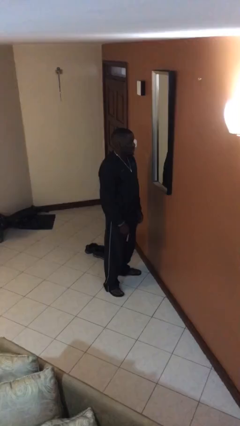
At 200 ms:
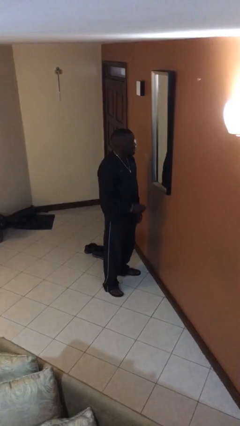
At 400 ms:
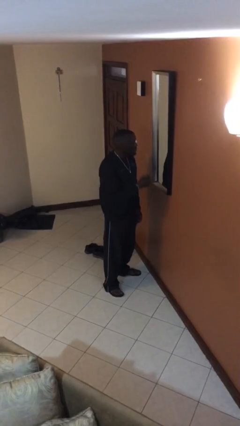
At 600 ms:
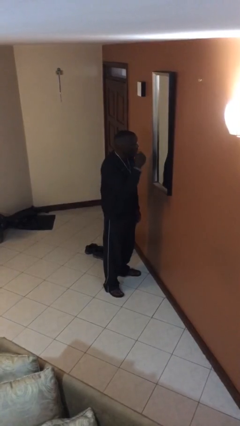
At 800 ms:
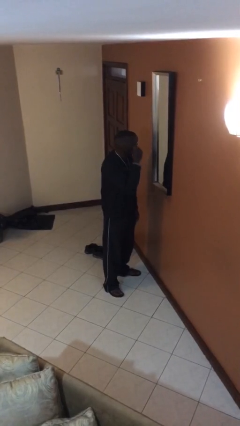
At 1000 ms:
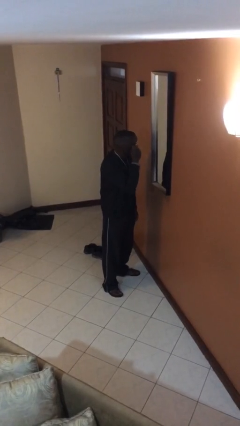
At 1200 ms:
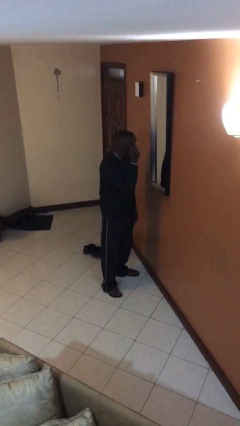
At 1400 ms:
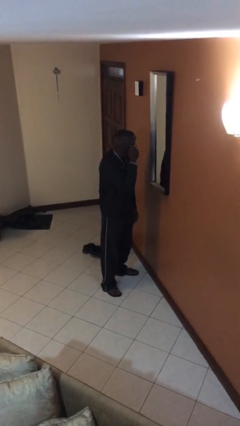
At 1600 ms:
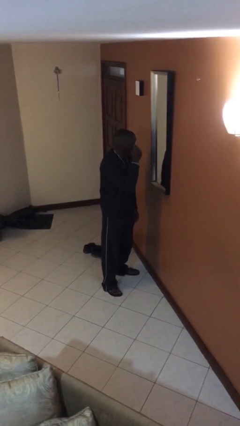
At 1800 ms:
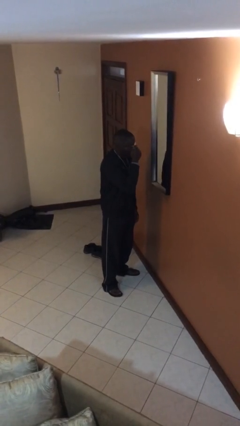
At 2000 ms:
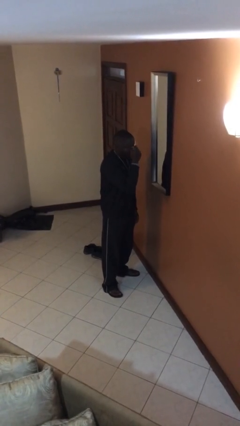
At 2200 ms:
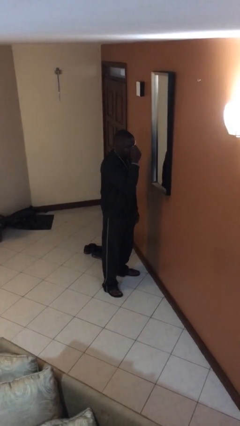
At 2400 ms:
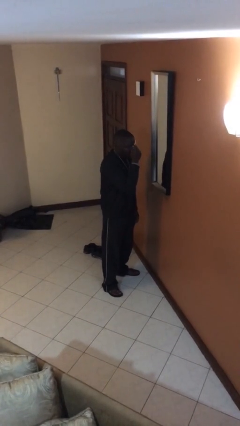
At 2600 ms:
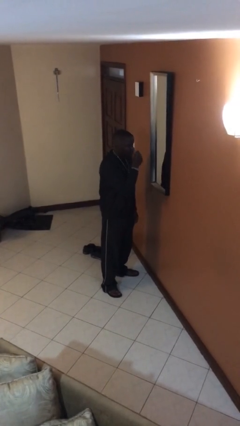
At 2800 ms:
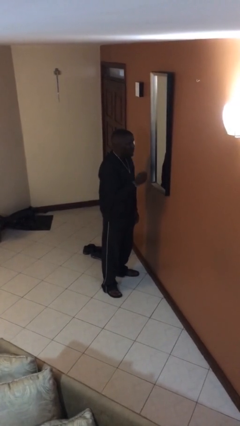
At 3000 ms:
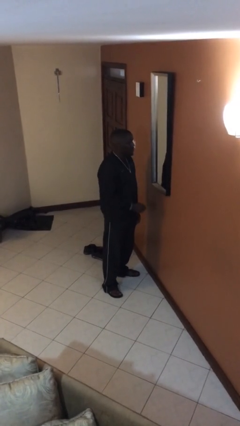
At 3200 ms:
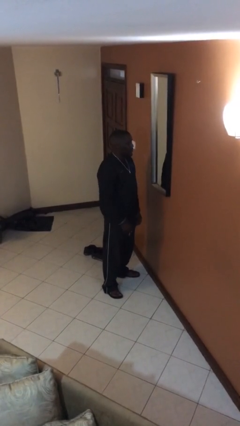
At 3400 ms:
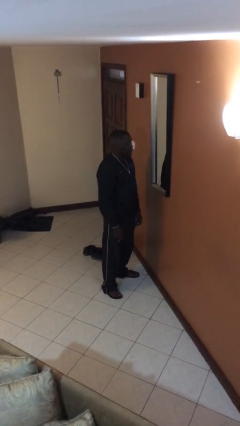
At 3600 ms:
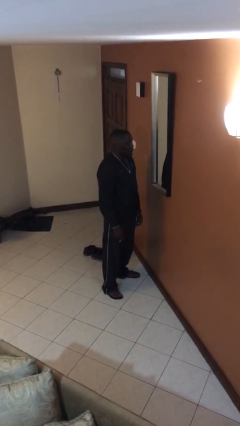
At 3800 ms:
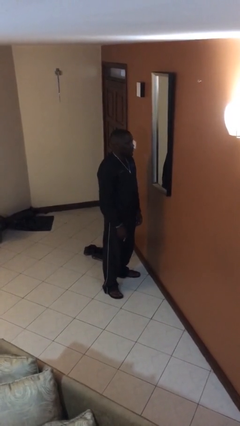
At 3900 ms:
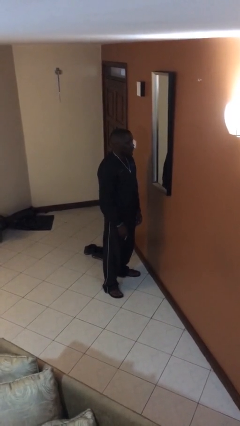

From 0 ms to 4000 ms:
person applies eye makeup

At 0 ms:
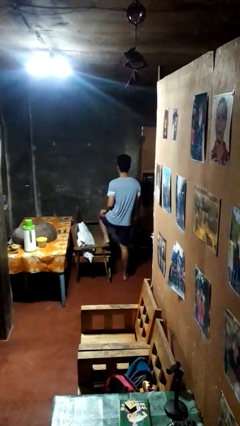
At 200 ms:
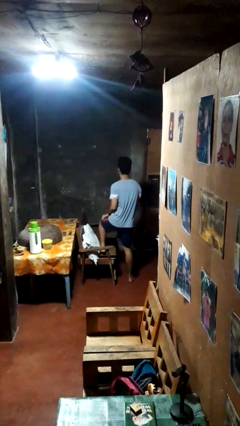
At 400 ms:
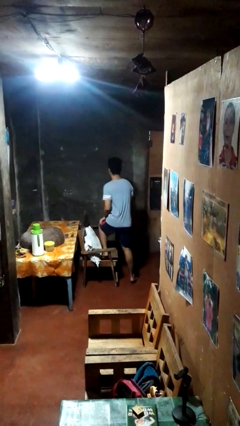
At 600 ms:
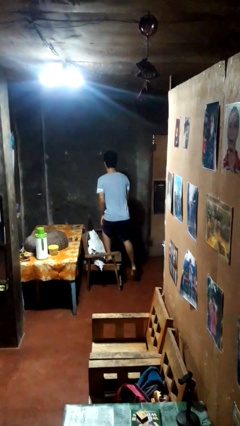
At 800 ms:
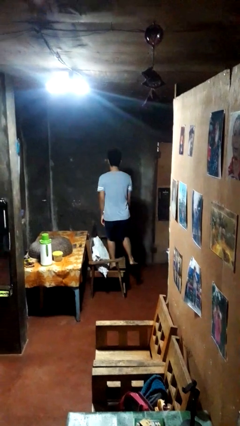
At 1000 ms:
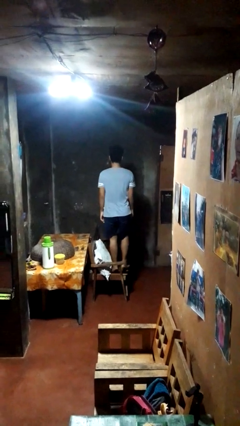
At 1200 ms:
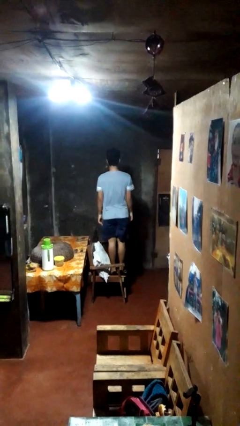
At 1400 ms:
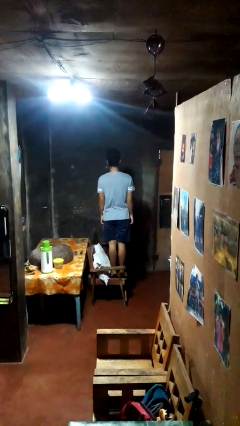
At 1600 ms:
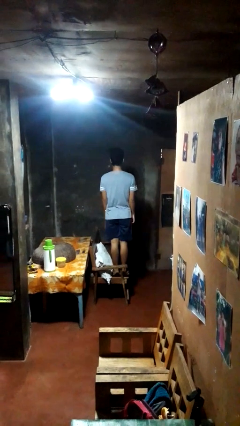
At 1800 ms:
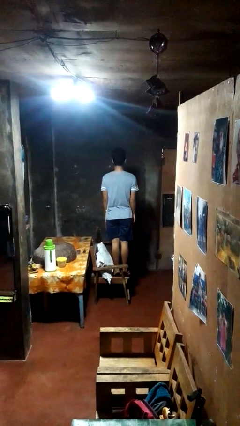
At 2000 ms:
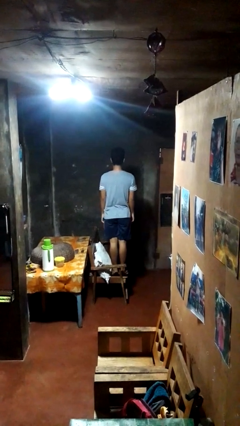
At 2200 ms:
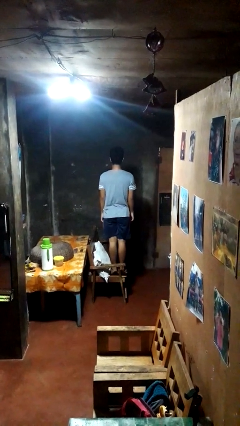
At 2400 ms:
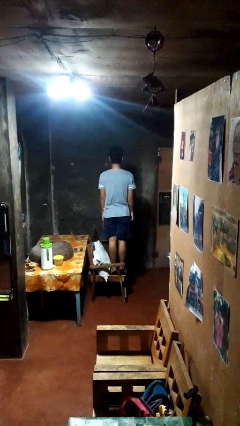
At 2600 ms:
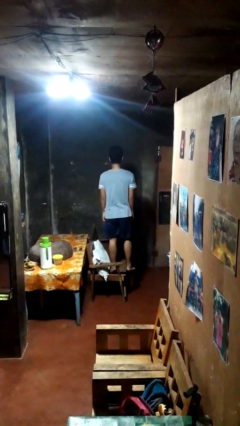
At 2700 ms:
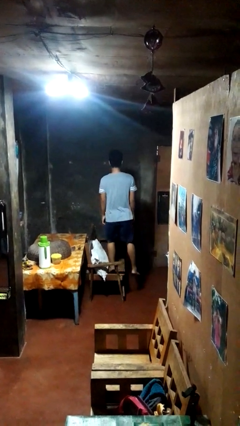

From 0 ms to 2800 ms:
person climbs on couch

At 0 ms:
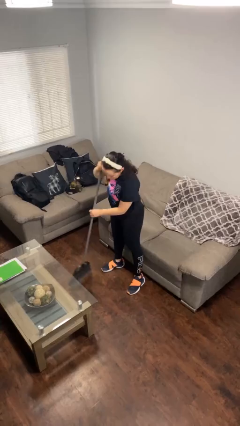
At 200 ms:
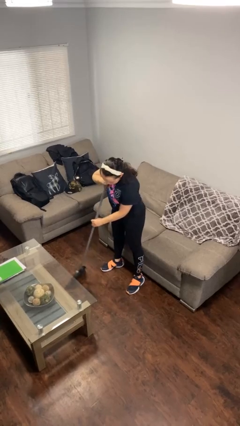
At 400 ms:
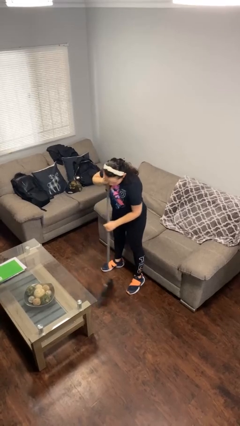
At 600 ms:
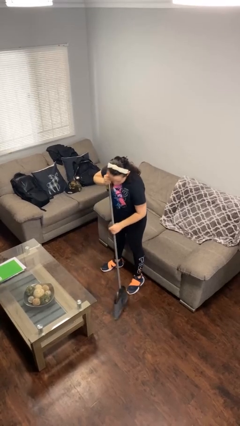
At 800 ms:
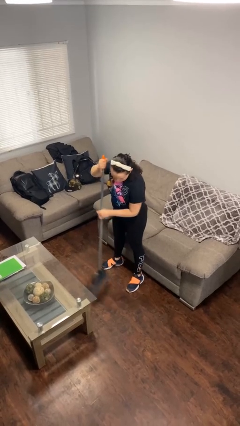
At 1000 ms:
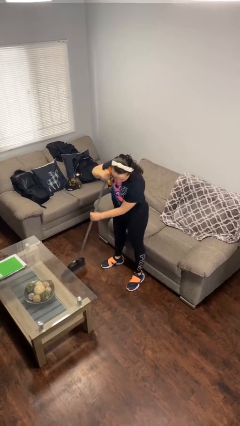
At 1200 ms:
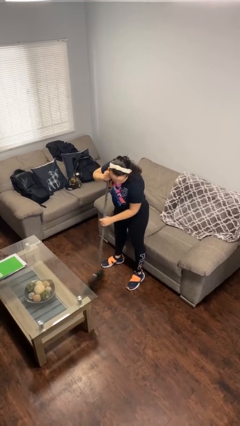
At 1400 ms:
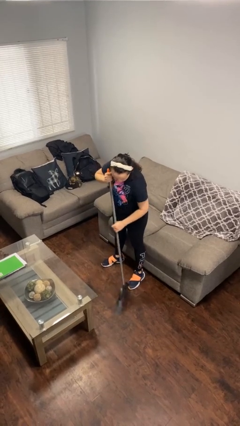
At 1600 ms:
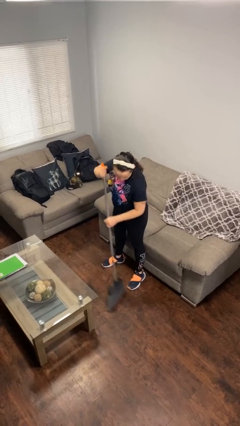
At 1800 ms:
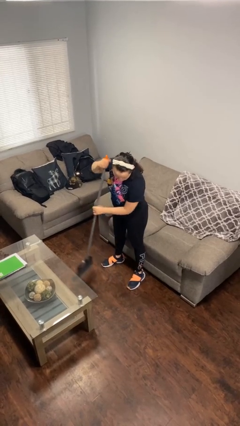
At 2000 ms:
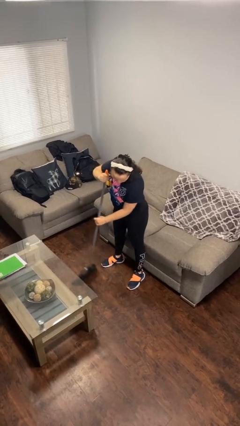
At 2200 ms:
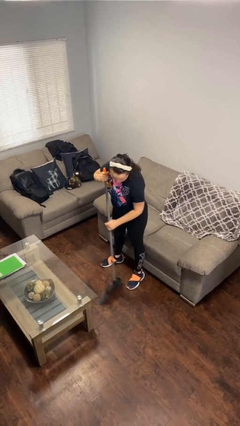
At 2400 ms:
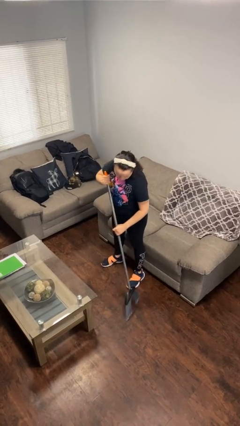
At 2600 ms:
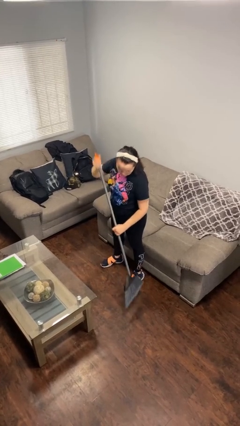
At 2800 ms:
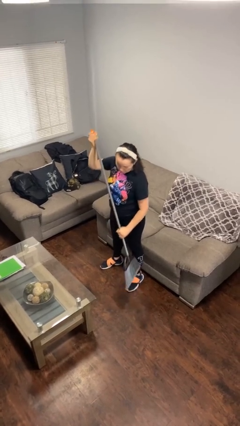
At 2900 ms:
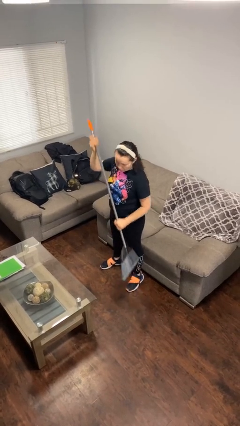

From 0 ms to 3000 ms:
person sweeps floor

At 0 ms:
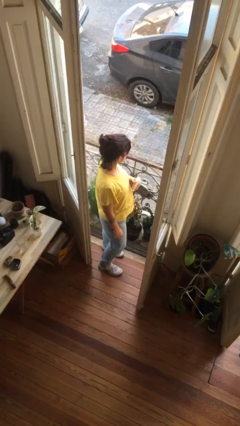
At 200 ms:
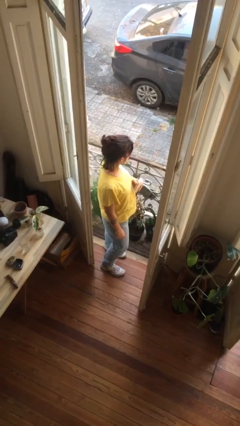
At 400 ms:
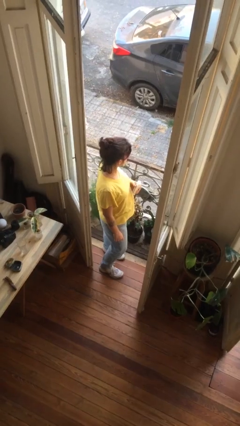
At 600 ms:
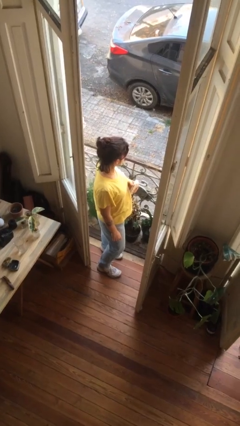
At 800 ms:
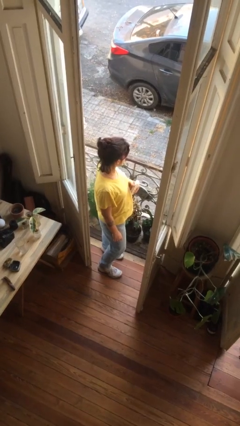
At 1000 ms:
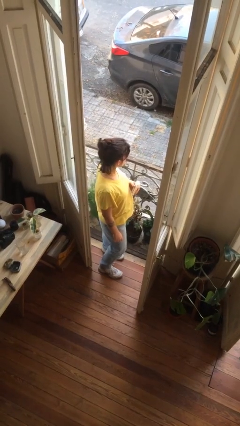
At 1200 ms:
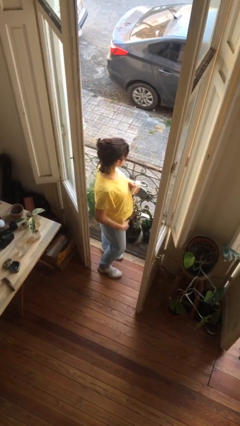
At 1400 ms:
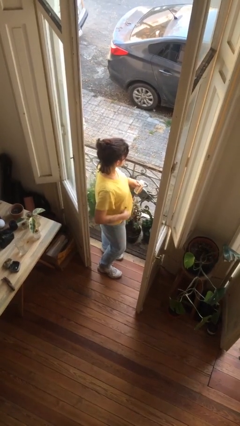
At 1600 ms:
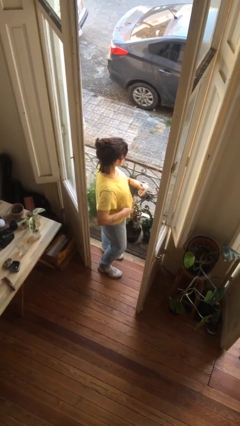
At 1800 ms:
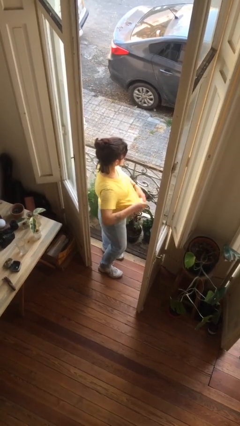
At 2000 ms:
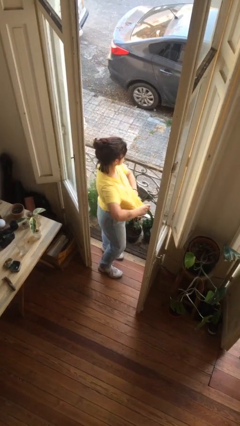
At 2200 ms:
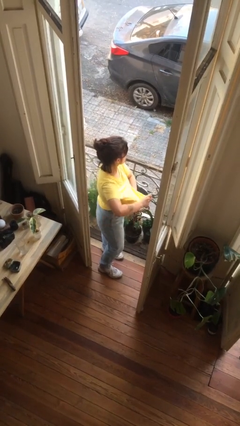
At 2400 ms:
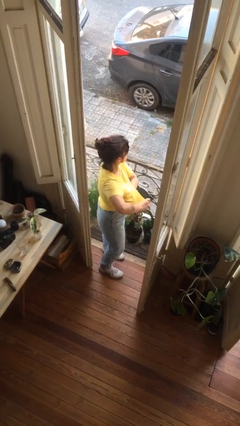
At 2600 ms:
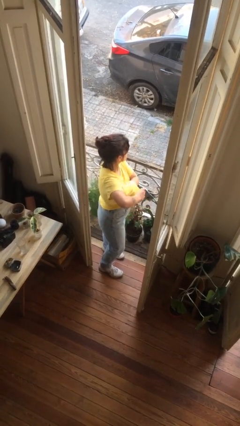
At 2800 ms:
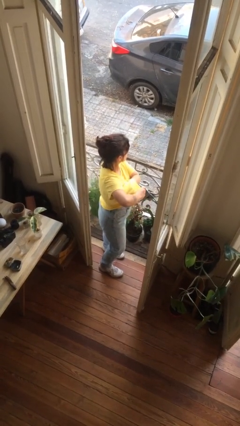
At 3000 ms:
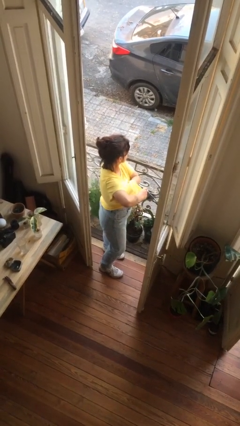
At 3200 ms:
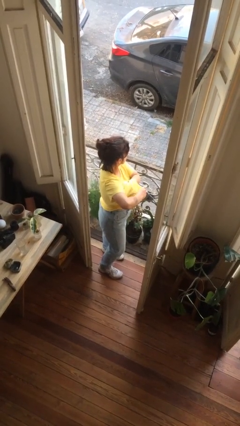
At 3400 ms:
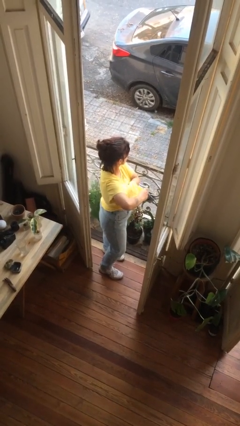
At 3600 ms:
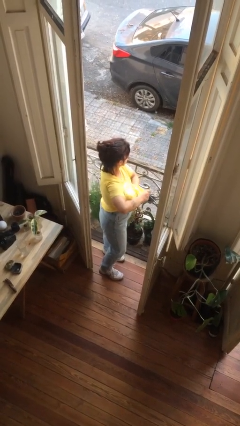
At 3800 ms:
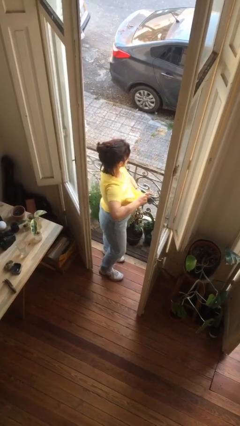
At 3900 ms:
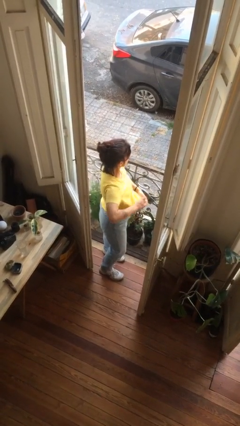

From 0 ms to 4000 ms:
person applies deodorant

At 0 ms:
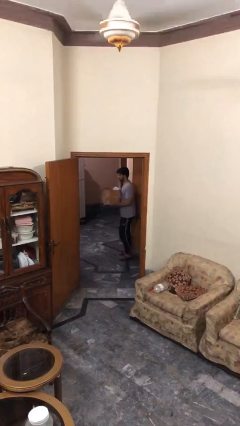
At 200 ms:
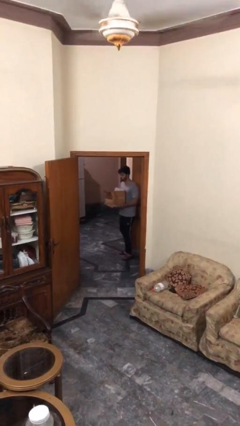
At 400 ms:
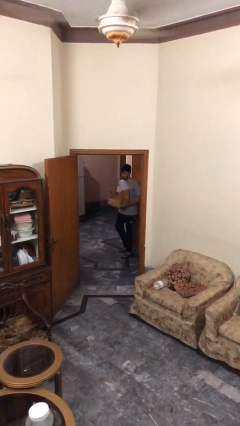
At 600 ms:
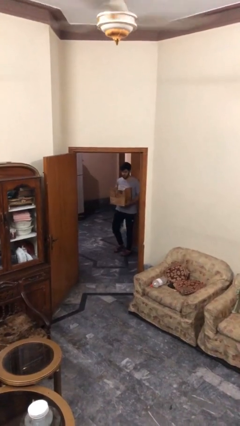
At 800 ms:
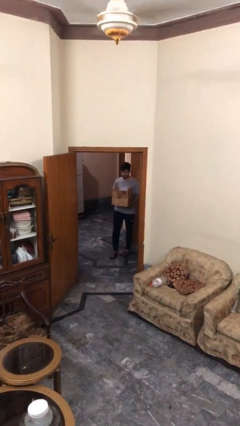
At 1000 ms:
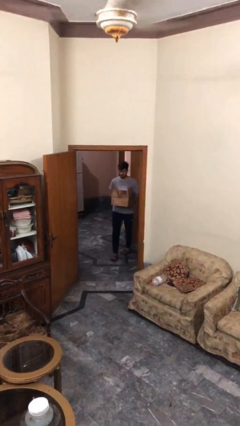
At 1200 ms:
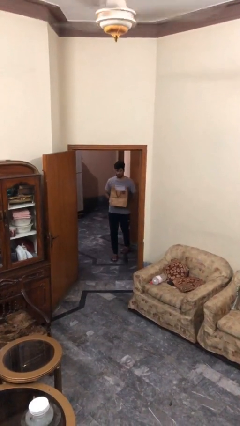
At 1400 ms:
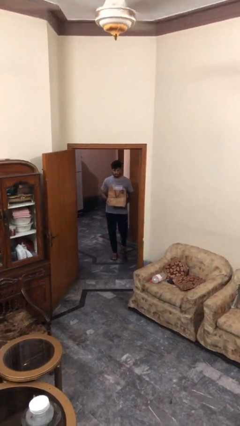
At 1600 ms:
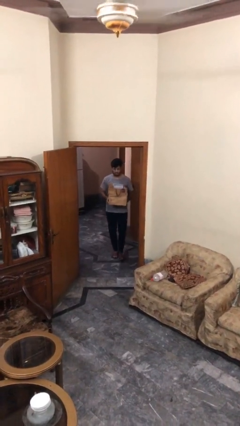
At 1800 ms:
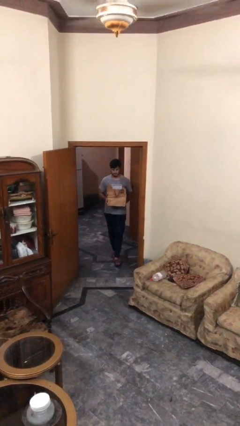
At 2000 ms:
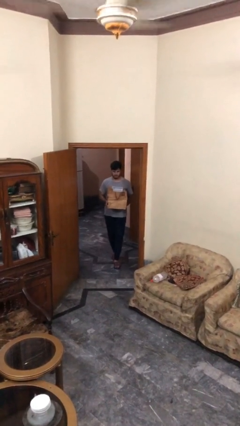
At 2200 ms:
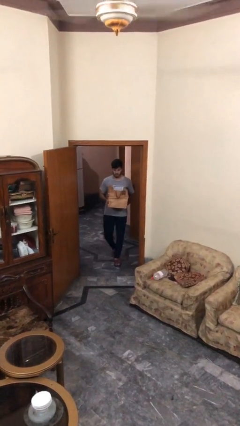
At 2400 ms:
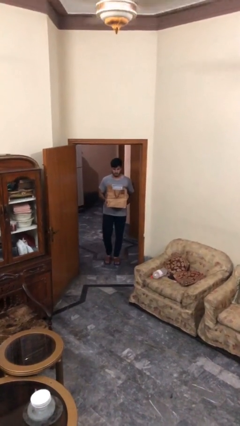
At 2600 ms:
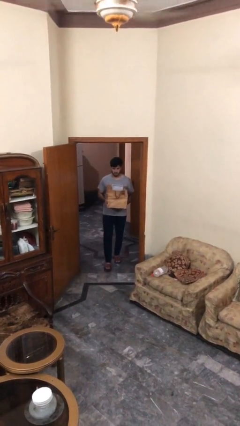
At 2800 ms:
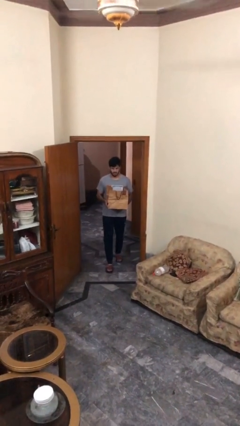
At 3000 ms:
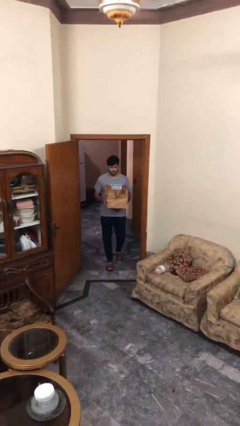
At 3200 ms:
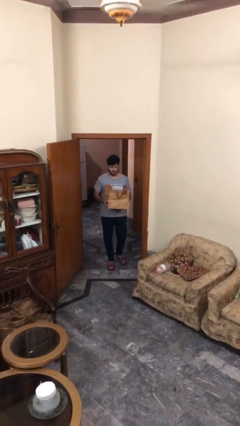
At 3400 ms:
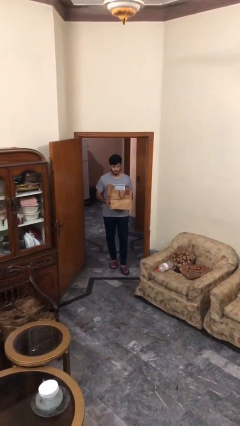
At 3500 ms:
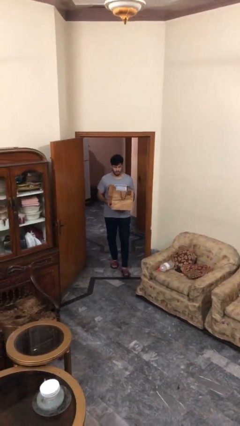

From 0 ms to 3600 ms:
person carries groceries
